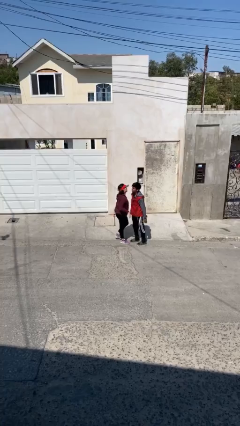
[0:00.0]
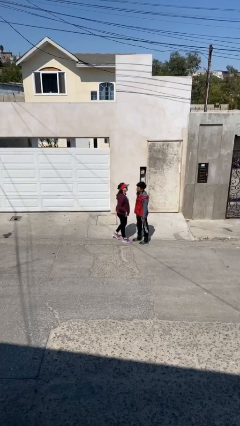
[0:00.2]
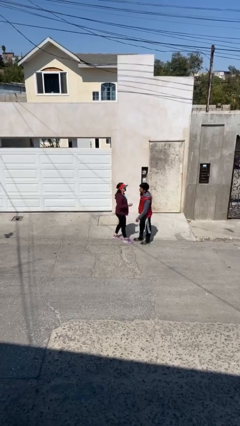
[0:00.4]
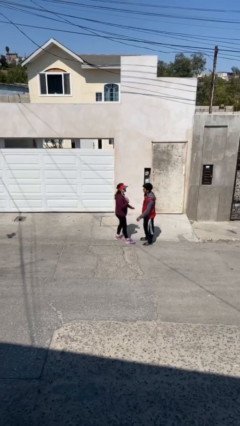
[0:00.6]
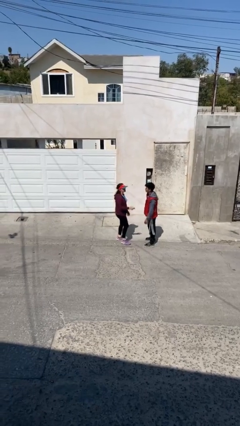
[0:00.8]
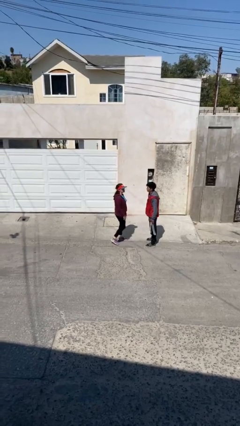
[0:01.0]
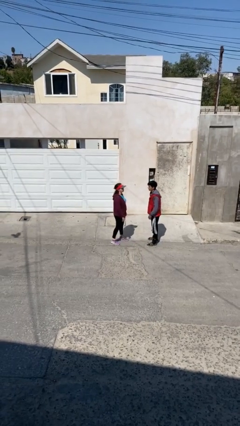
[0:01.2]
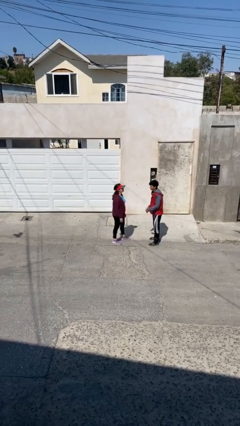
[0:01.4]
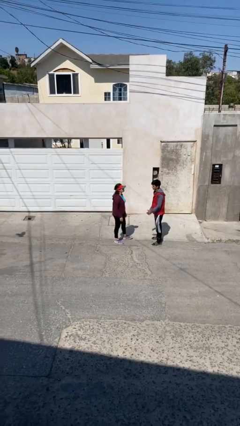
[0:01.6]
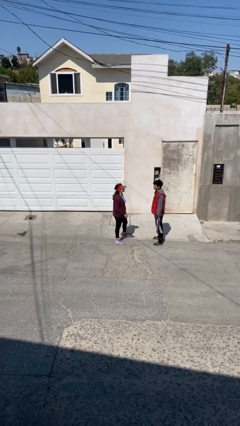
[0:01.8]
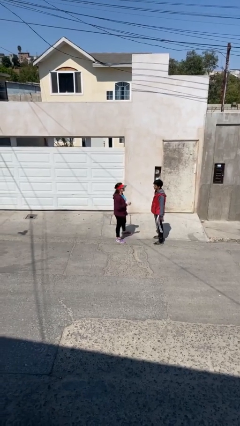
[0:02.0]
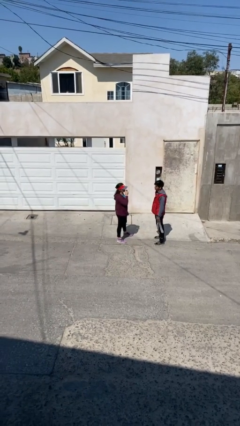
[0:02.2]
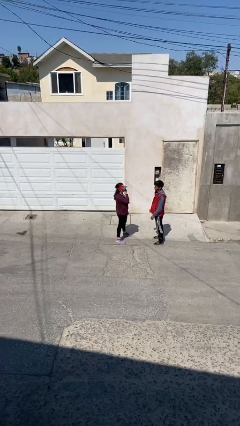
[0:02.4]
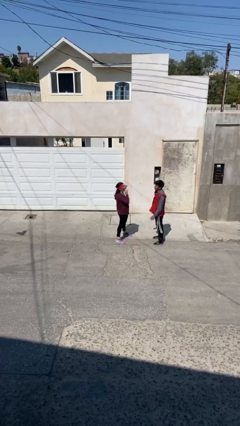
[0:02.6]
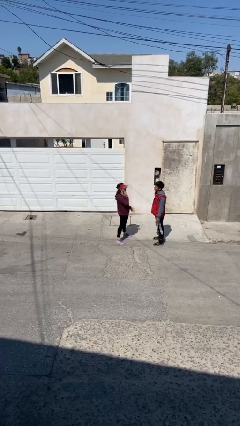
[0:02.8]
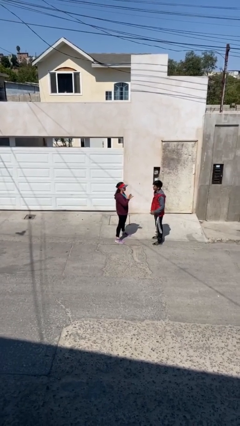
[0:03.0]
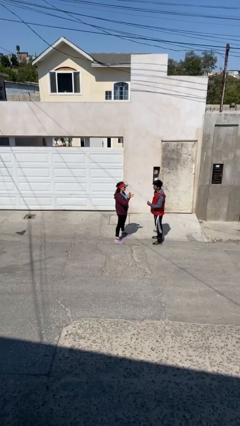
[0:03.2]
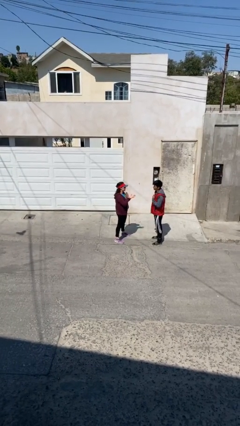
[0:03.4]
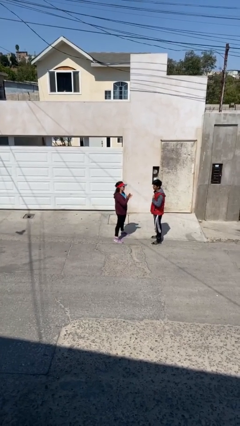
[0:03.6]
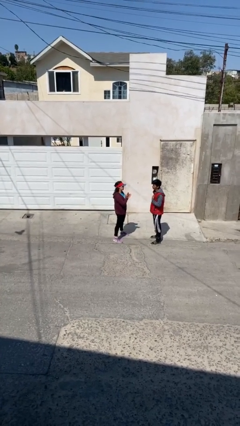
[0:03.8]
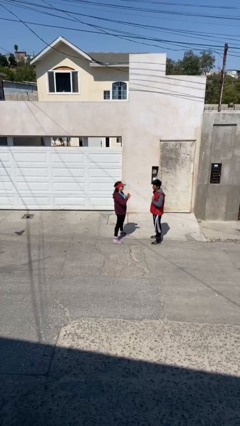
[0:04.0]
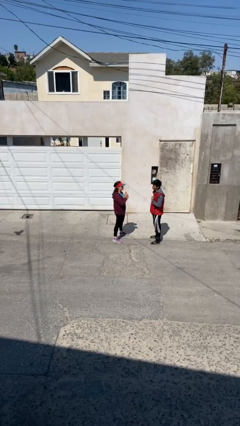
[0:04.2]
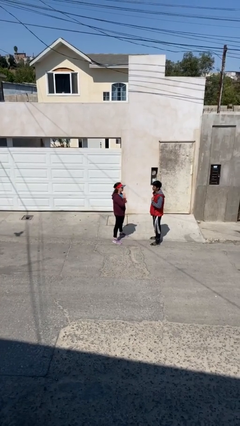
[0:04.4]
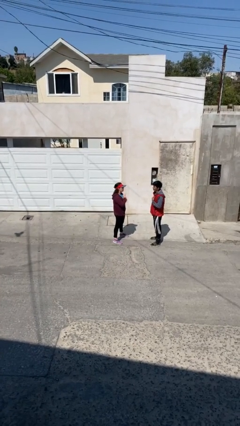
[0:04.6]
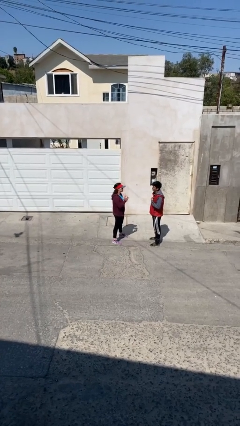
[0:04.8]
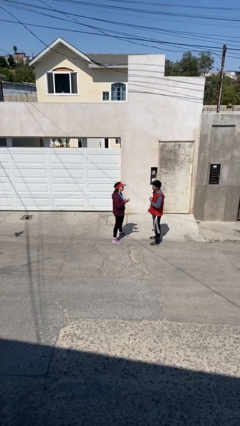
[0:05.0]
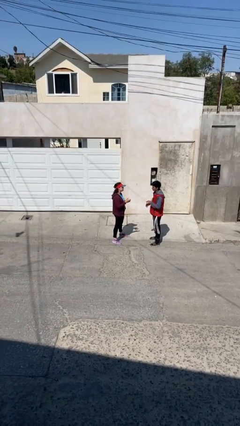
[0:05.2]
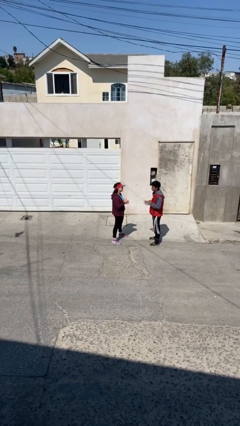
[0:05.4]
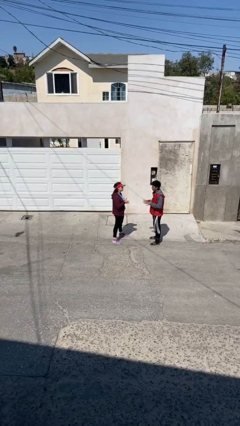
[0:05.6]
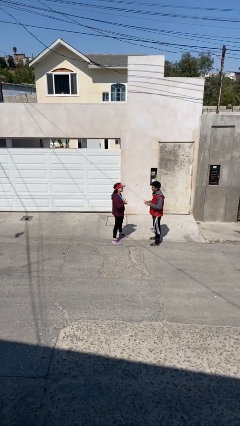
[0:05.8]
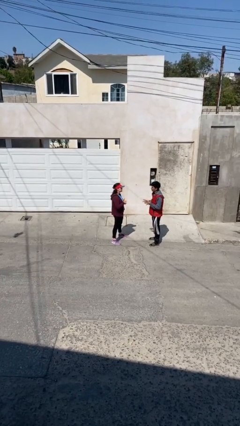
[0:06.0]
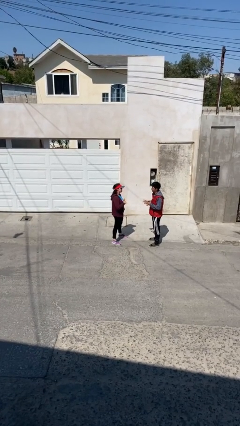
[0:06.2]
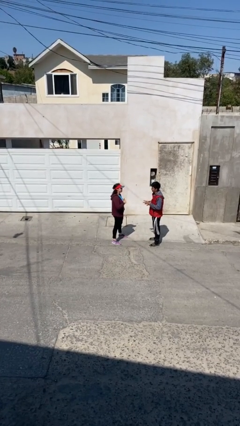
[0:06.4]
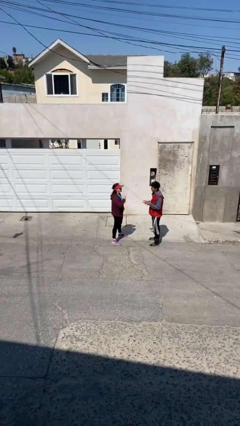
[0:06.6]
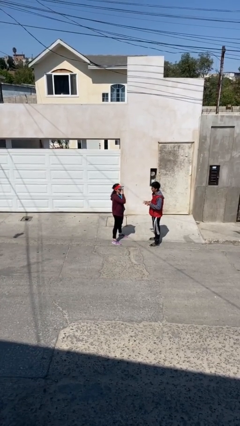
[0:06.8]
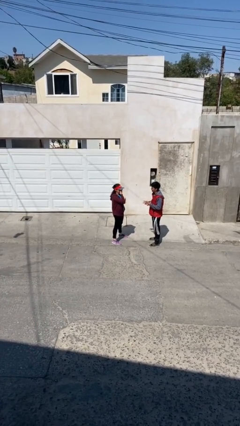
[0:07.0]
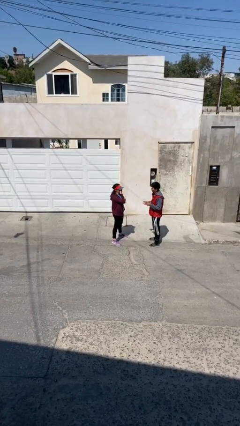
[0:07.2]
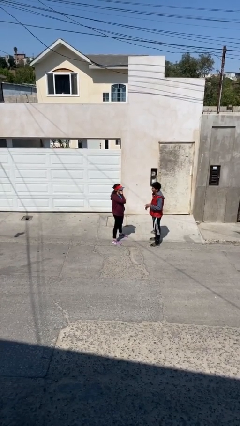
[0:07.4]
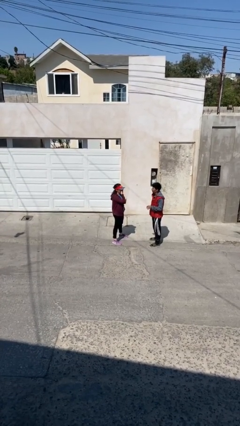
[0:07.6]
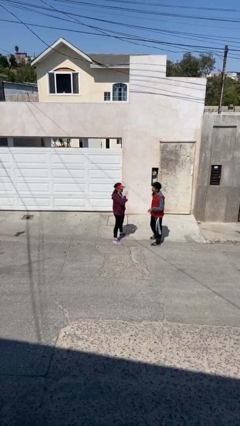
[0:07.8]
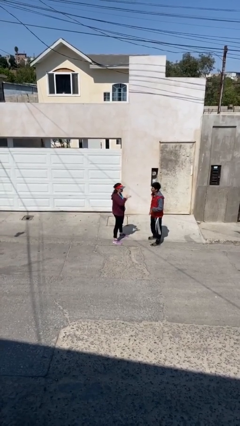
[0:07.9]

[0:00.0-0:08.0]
person talks to person

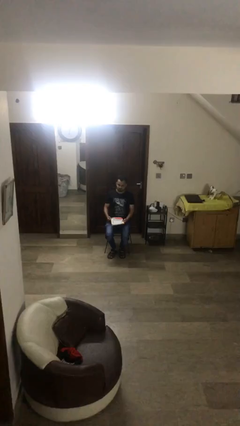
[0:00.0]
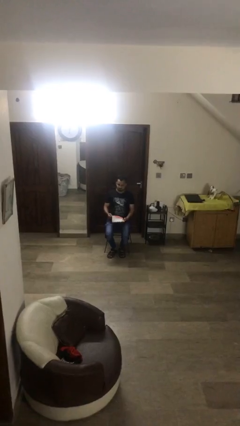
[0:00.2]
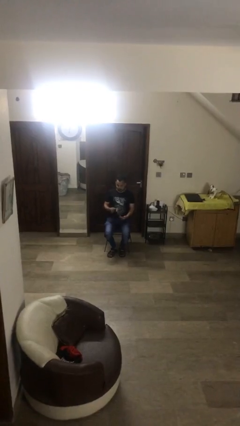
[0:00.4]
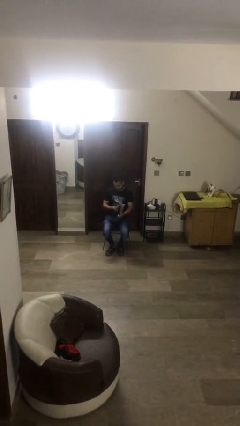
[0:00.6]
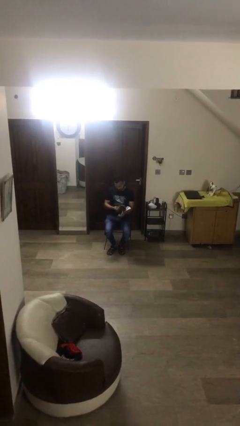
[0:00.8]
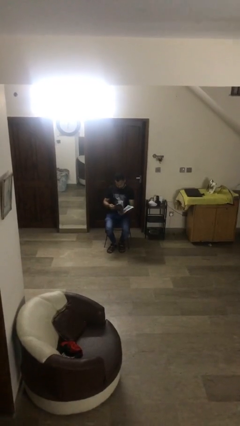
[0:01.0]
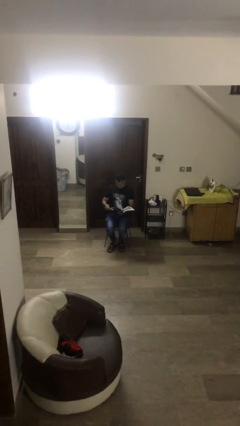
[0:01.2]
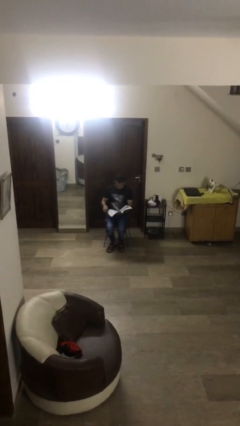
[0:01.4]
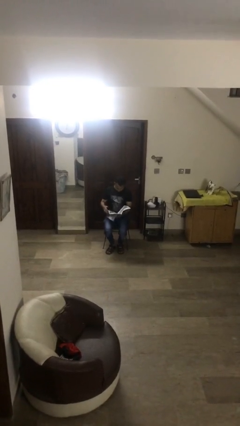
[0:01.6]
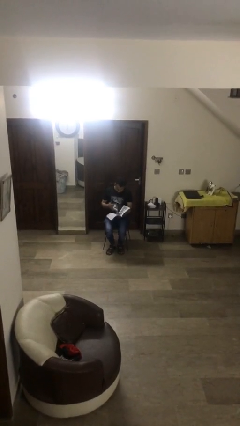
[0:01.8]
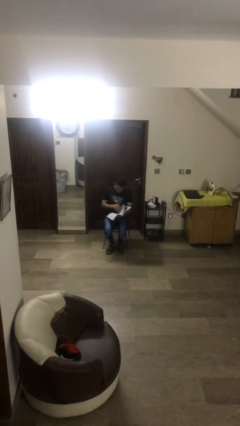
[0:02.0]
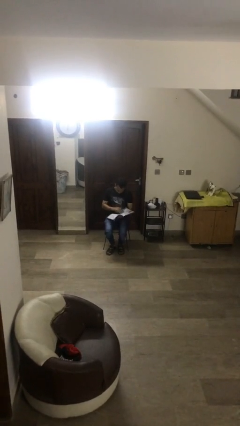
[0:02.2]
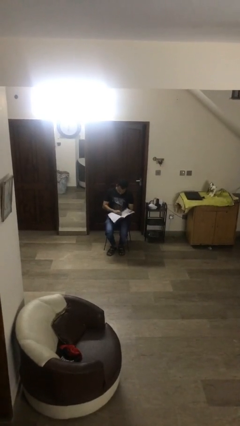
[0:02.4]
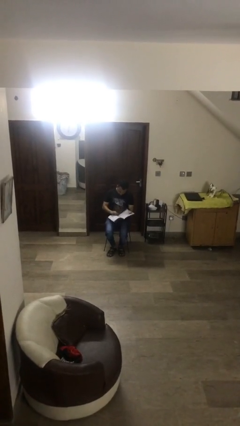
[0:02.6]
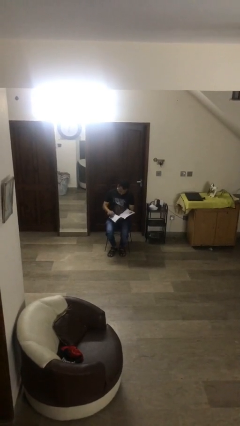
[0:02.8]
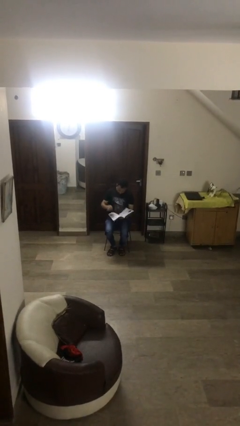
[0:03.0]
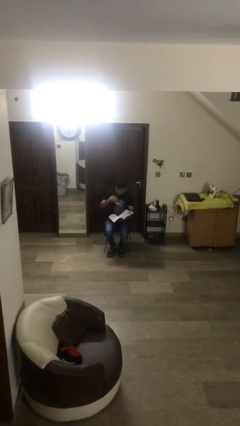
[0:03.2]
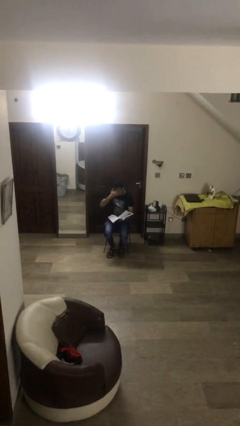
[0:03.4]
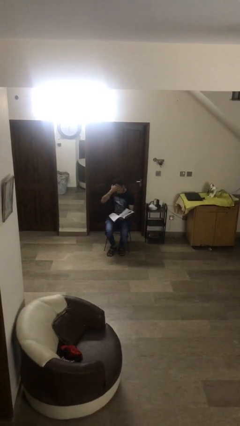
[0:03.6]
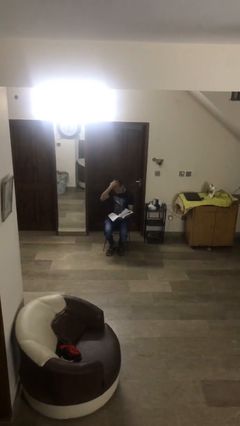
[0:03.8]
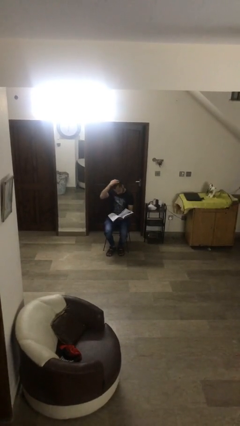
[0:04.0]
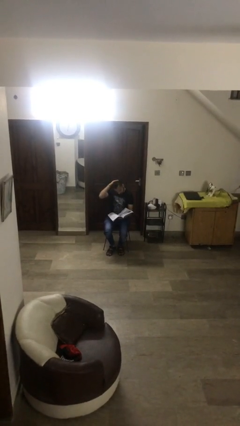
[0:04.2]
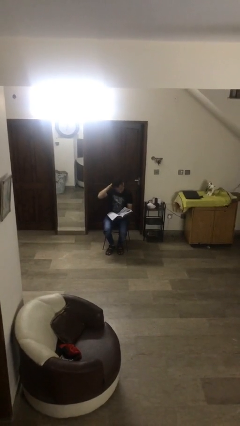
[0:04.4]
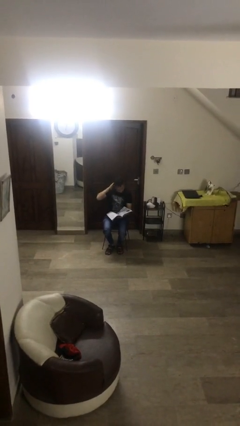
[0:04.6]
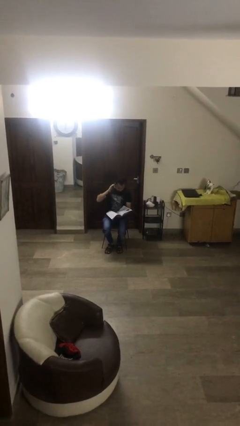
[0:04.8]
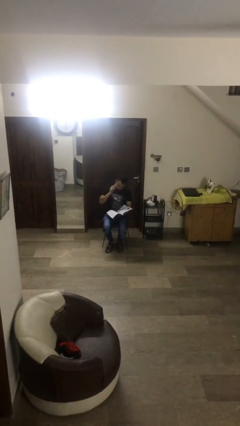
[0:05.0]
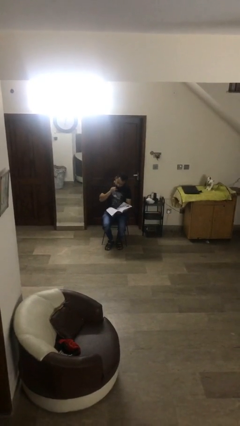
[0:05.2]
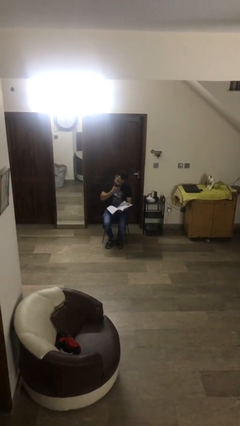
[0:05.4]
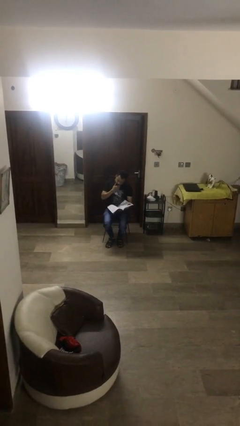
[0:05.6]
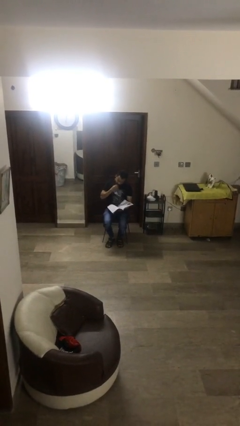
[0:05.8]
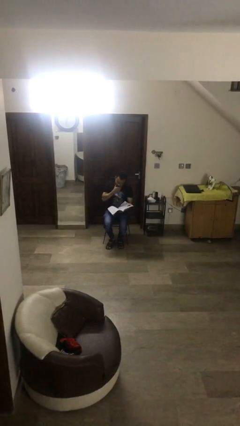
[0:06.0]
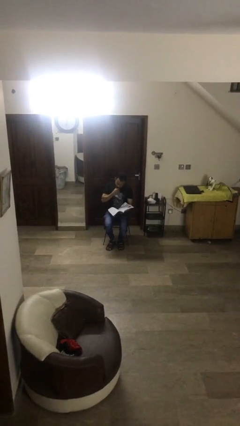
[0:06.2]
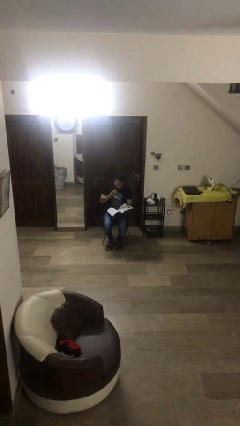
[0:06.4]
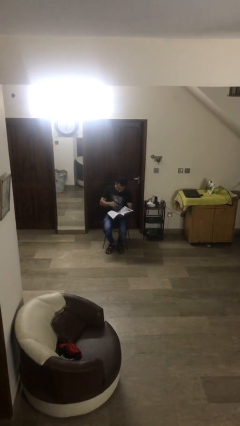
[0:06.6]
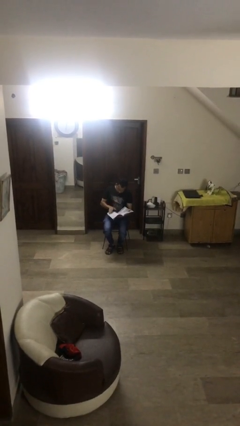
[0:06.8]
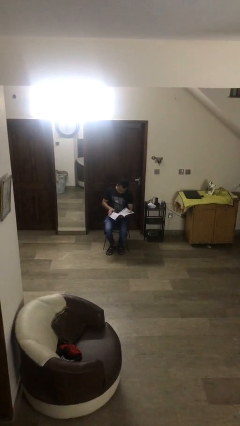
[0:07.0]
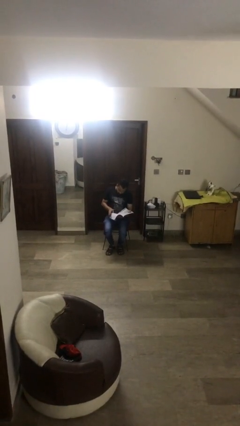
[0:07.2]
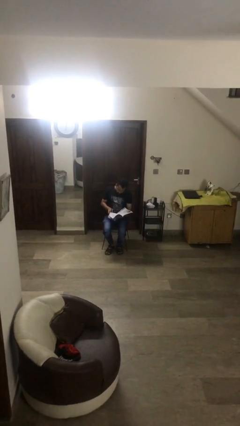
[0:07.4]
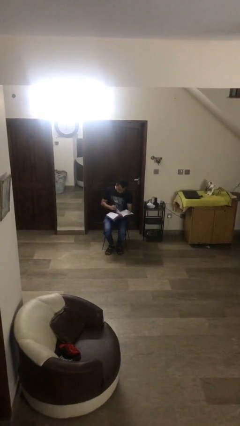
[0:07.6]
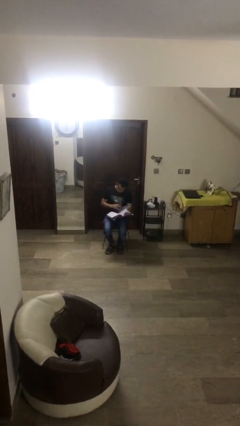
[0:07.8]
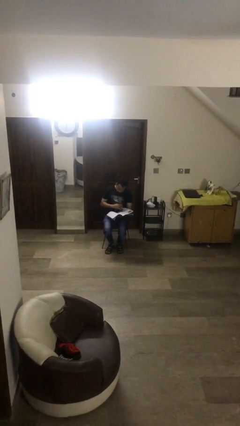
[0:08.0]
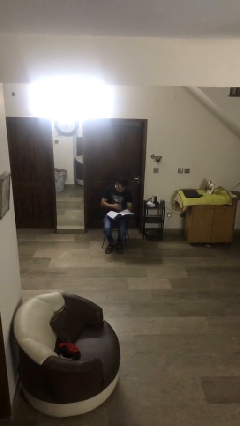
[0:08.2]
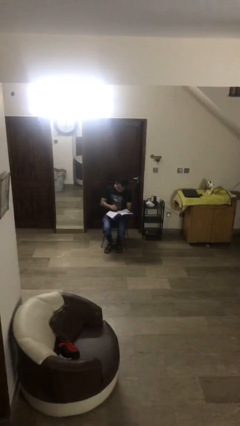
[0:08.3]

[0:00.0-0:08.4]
person reads document

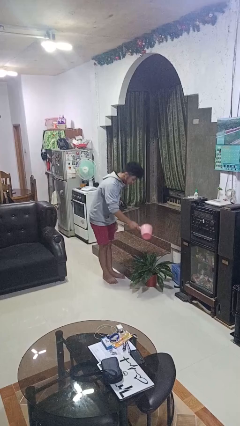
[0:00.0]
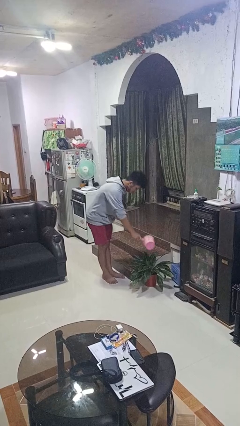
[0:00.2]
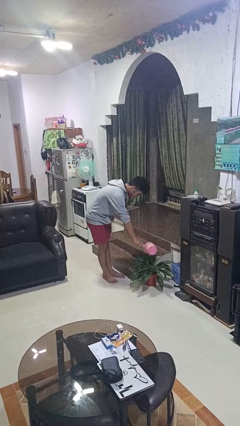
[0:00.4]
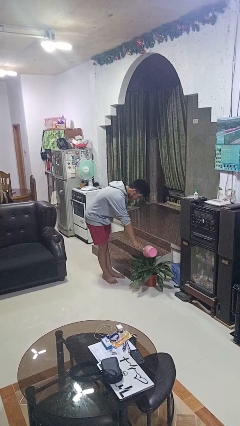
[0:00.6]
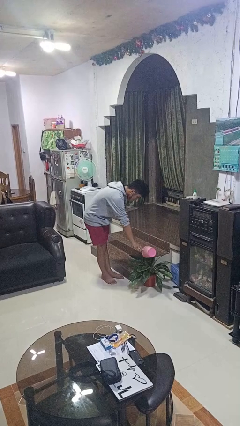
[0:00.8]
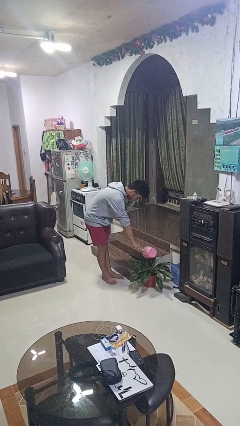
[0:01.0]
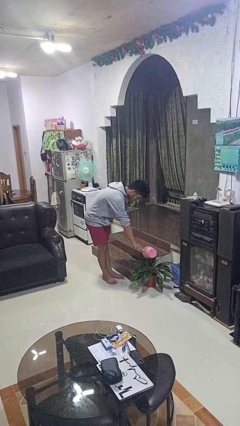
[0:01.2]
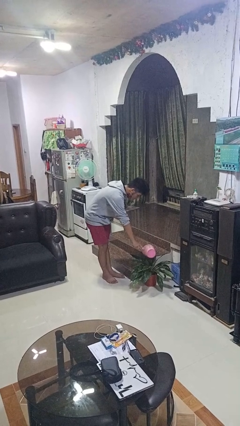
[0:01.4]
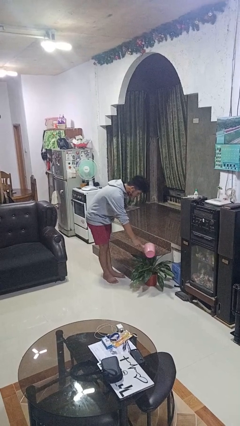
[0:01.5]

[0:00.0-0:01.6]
person waters houseplant
